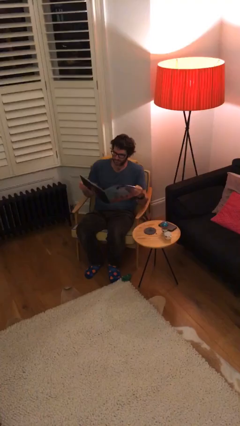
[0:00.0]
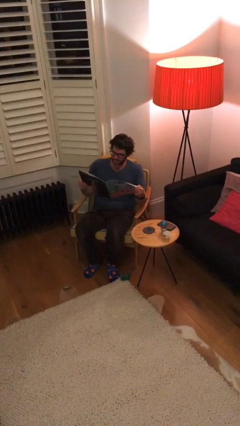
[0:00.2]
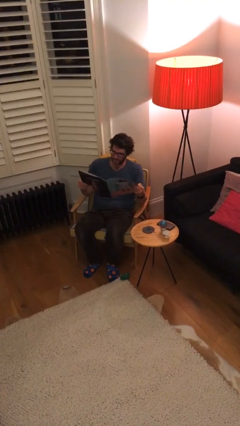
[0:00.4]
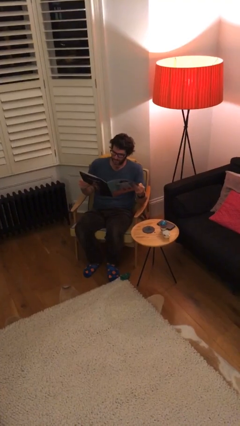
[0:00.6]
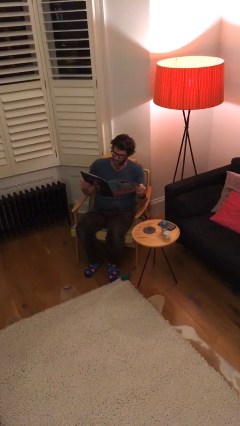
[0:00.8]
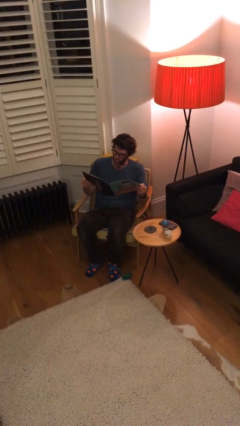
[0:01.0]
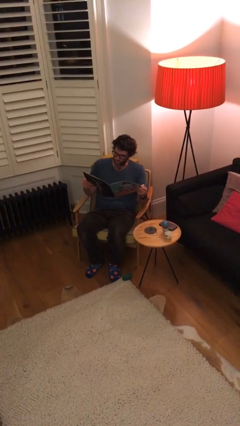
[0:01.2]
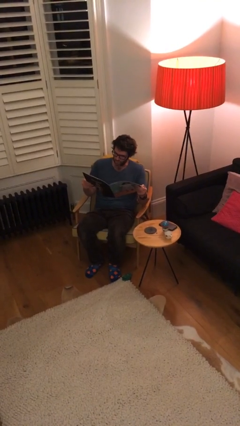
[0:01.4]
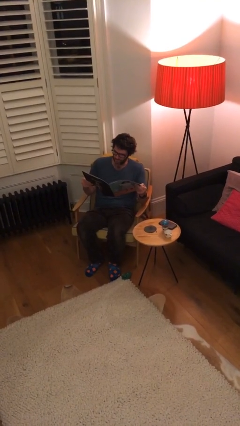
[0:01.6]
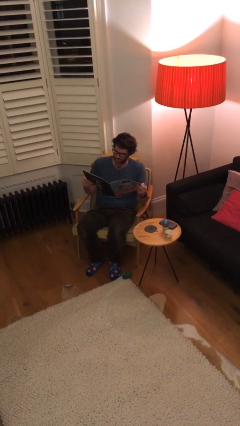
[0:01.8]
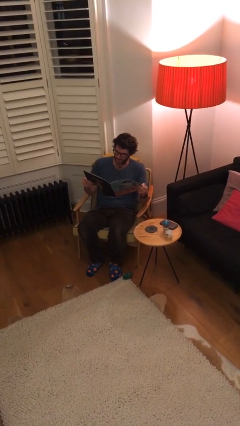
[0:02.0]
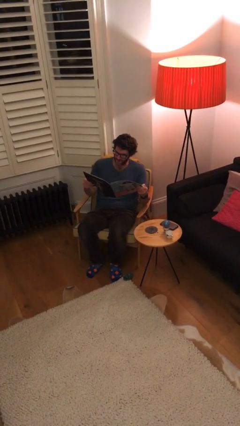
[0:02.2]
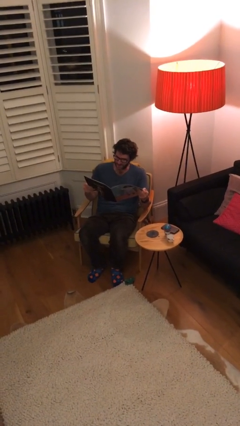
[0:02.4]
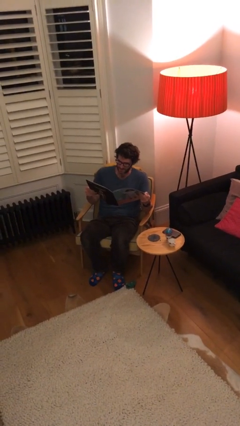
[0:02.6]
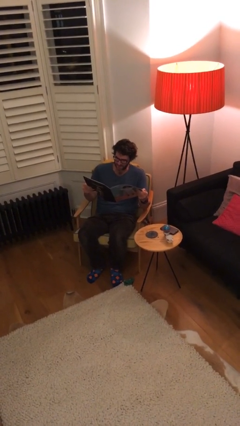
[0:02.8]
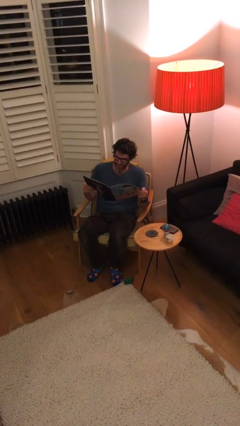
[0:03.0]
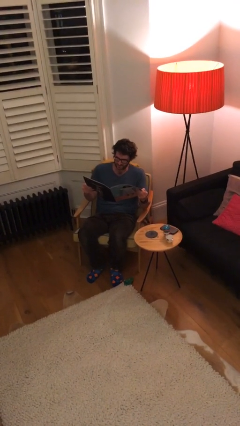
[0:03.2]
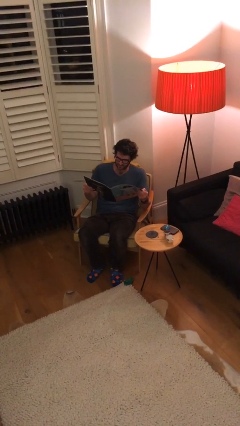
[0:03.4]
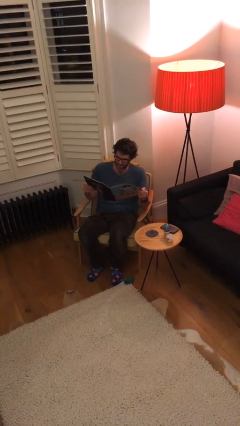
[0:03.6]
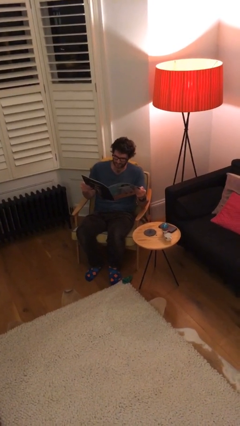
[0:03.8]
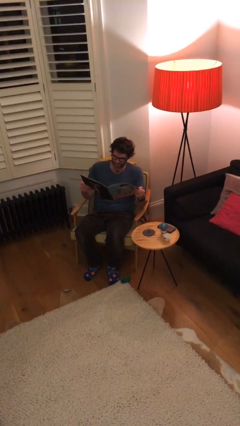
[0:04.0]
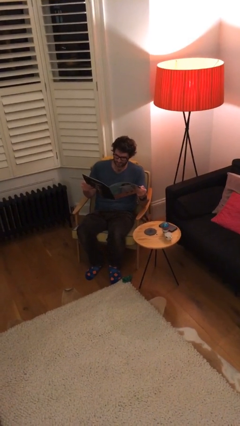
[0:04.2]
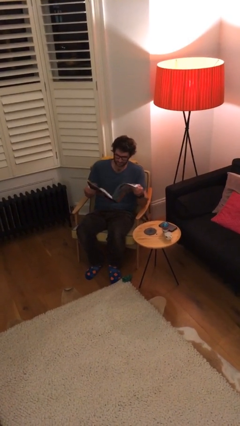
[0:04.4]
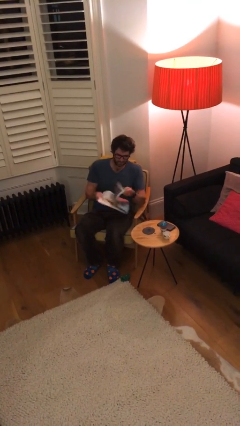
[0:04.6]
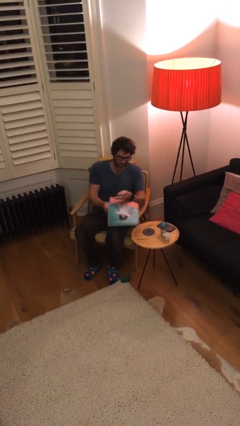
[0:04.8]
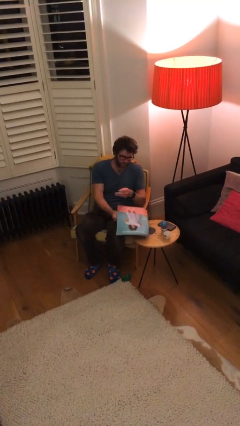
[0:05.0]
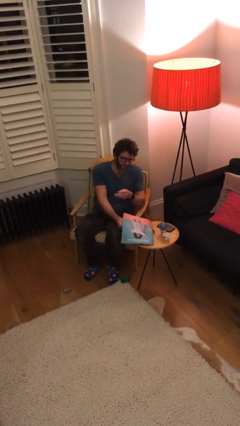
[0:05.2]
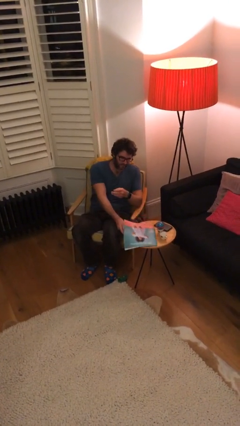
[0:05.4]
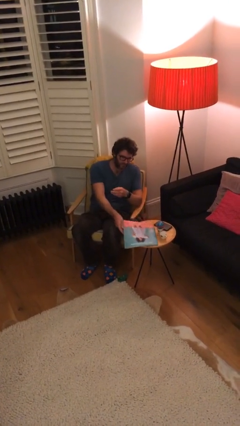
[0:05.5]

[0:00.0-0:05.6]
person reads document

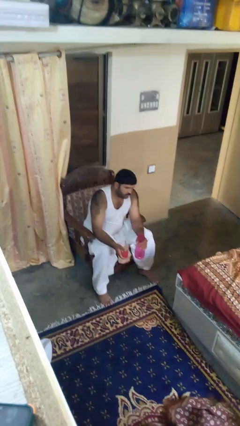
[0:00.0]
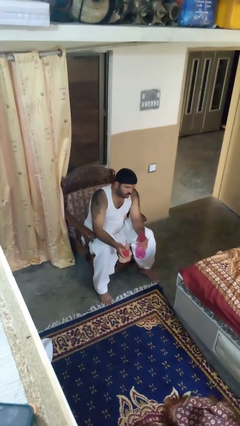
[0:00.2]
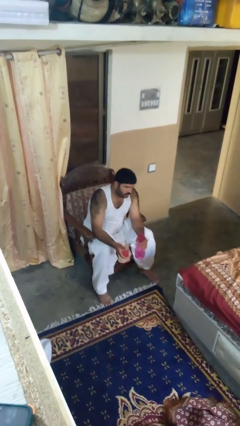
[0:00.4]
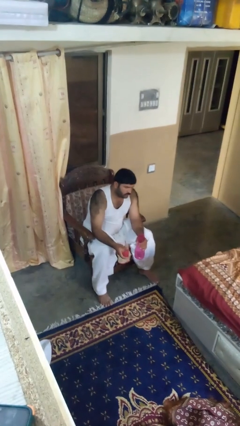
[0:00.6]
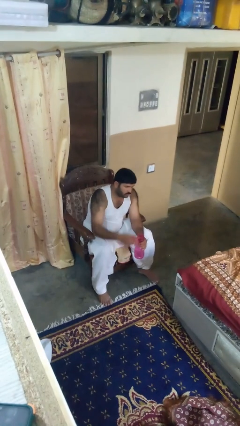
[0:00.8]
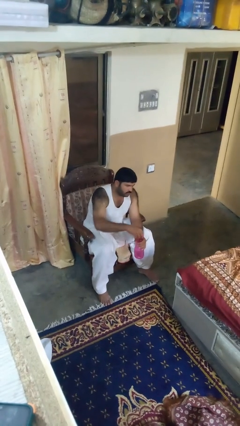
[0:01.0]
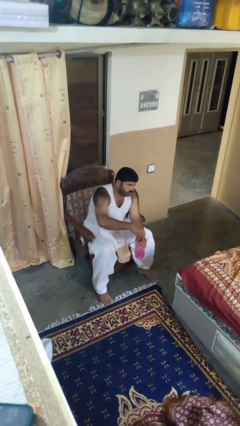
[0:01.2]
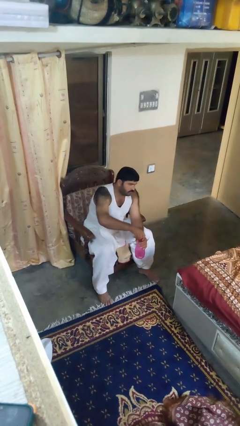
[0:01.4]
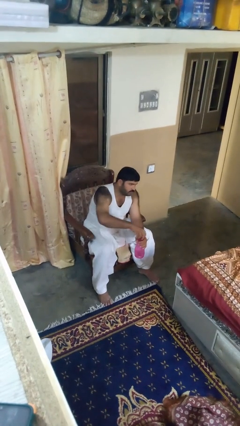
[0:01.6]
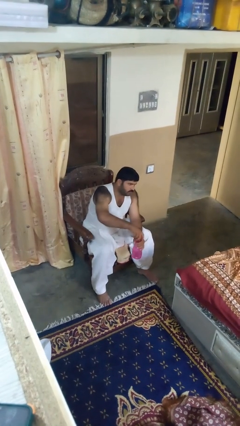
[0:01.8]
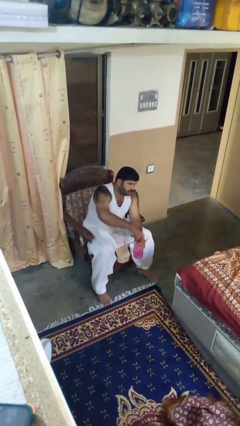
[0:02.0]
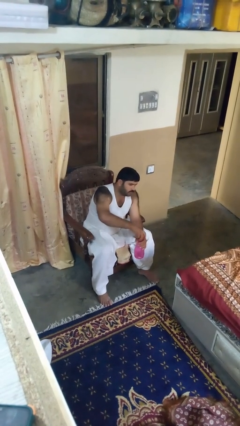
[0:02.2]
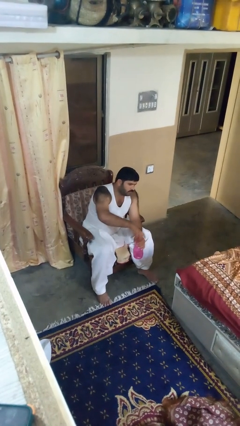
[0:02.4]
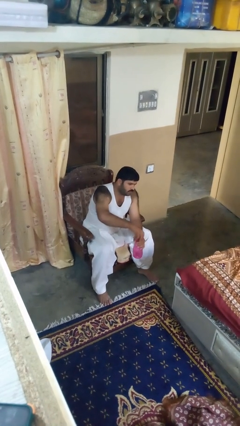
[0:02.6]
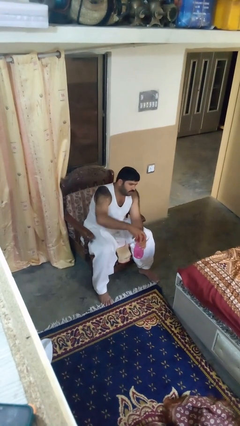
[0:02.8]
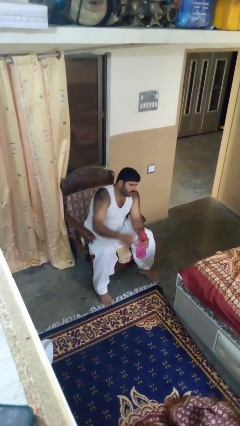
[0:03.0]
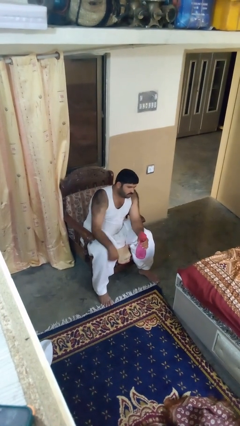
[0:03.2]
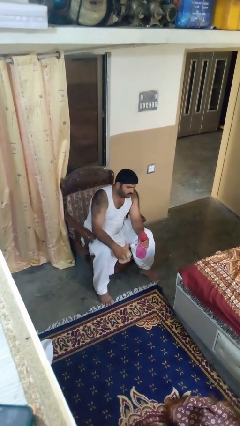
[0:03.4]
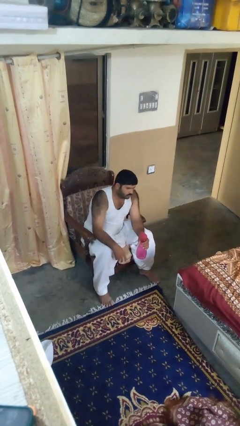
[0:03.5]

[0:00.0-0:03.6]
person screws lid to bottle

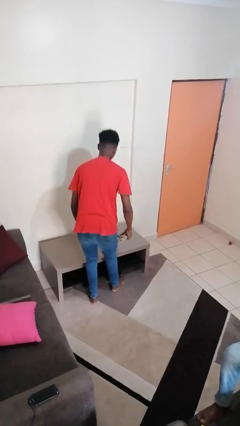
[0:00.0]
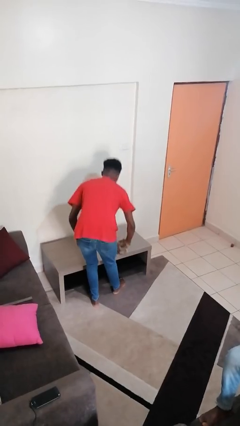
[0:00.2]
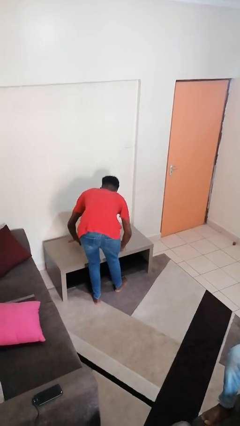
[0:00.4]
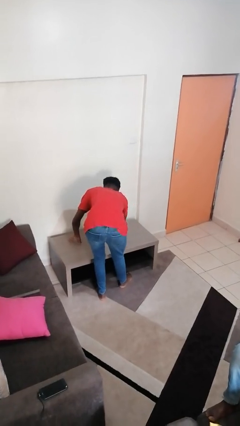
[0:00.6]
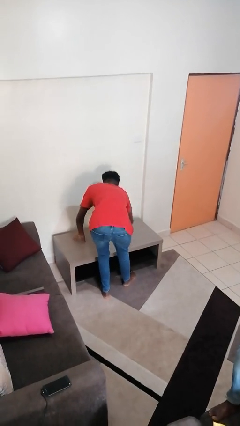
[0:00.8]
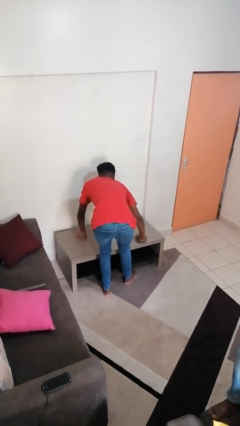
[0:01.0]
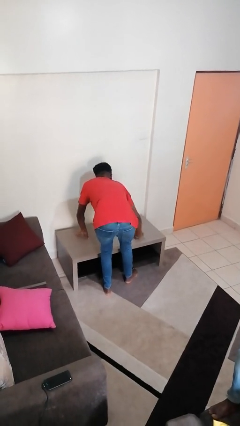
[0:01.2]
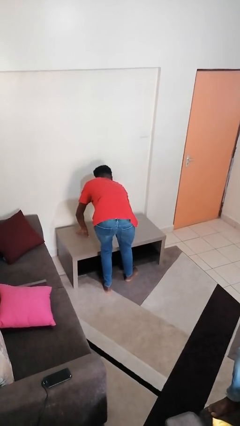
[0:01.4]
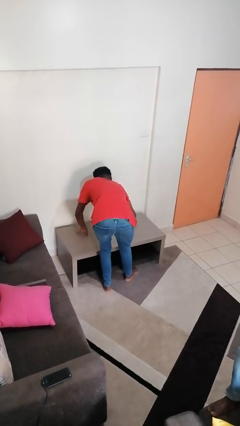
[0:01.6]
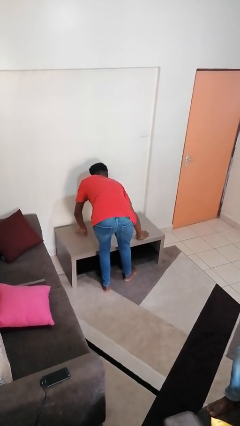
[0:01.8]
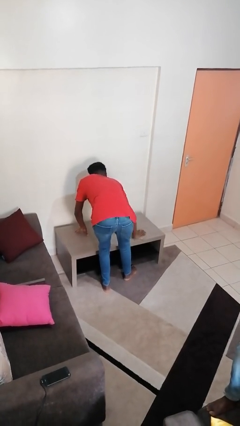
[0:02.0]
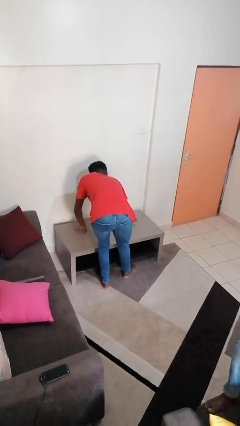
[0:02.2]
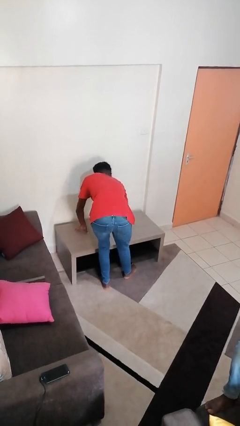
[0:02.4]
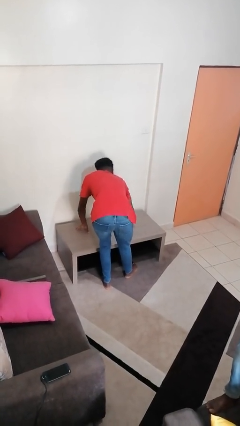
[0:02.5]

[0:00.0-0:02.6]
person cleans table with rag

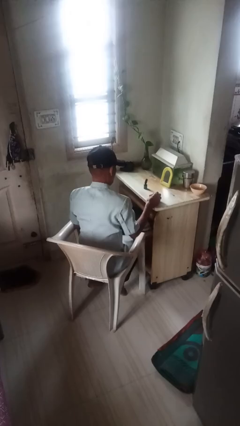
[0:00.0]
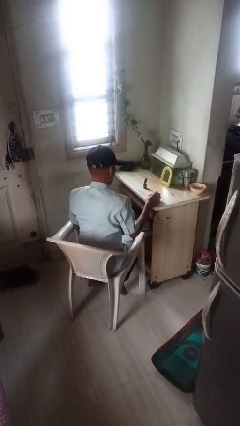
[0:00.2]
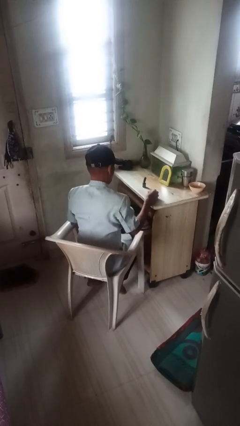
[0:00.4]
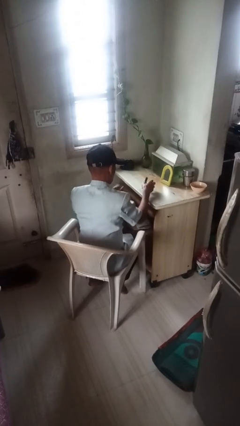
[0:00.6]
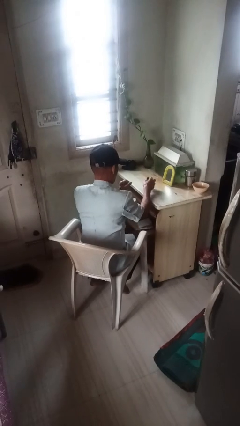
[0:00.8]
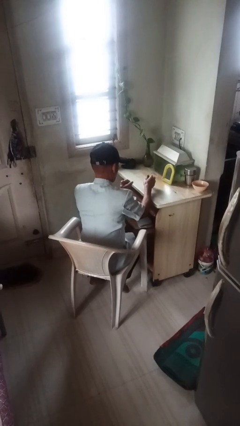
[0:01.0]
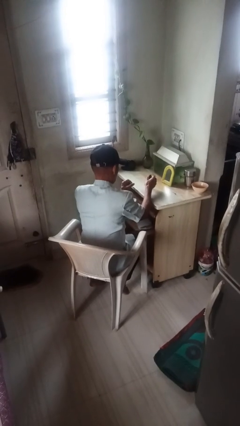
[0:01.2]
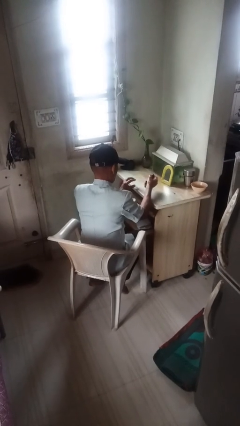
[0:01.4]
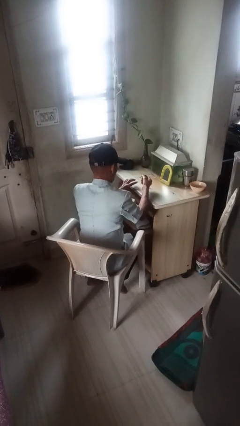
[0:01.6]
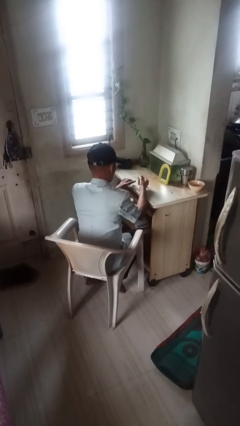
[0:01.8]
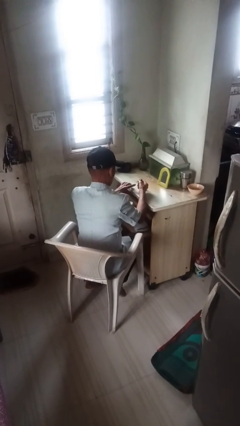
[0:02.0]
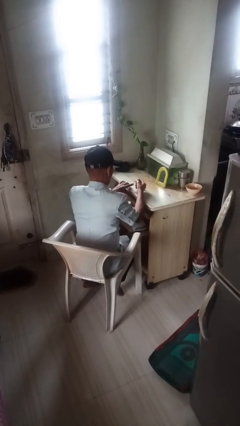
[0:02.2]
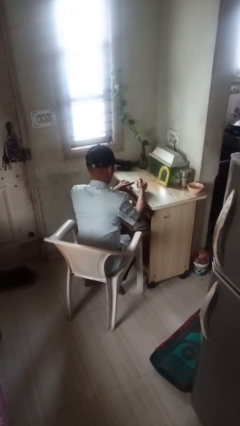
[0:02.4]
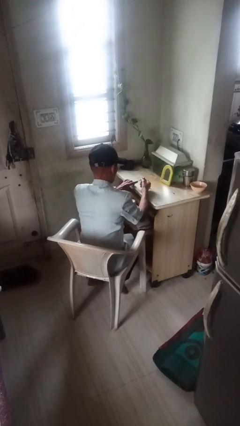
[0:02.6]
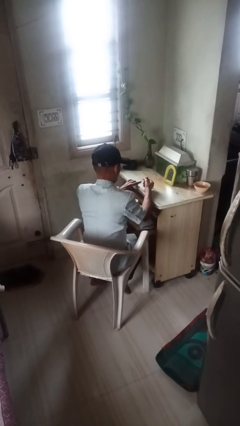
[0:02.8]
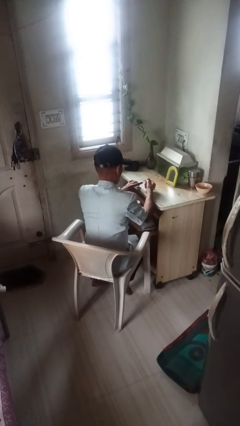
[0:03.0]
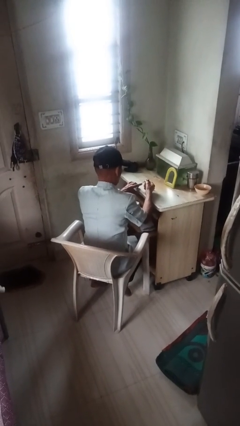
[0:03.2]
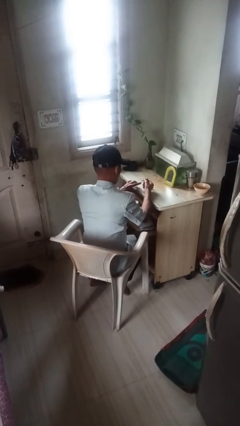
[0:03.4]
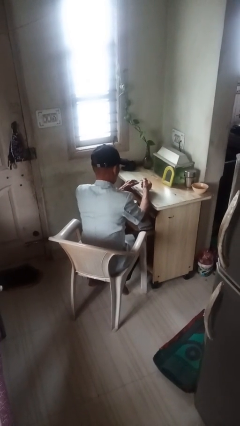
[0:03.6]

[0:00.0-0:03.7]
person paints fingernails

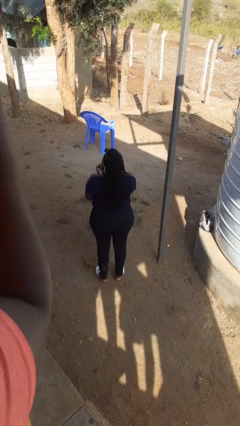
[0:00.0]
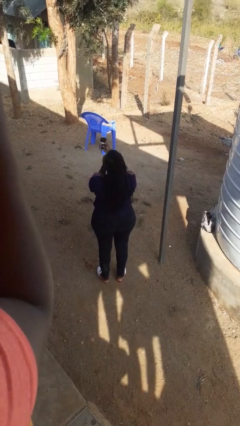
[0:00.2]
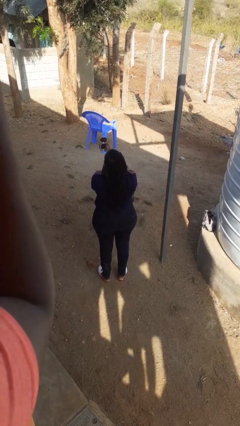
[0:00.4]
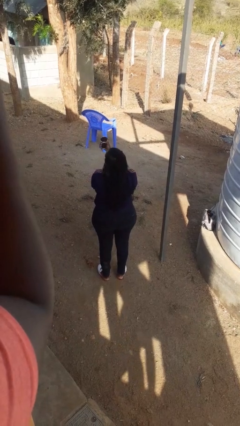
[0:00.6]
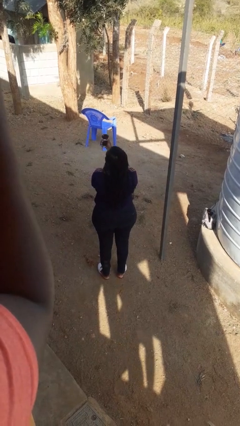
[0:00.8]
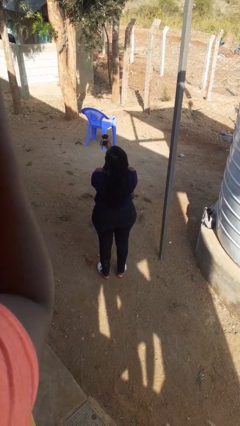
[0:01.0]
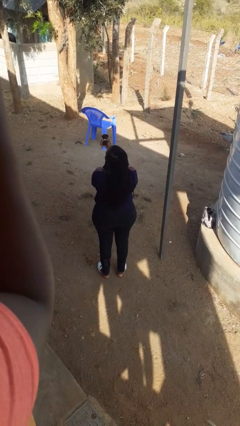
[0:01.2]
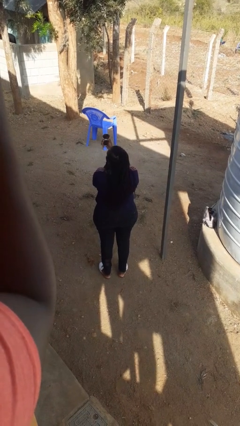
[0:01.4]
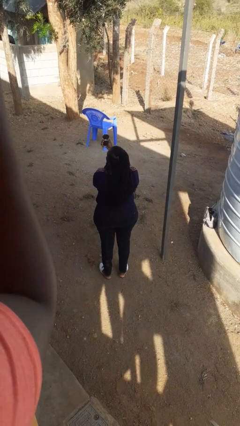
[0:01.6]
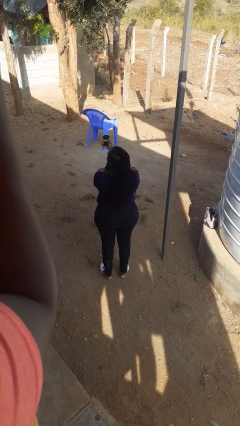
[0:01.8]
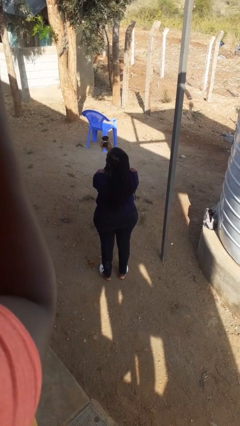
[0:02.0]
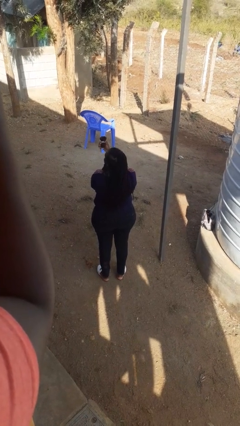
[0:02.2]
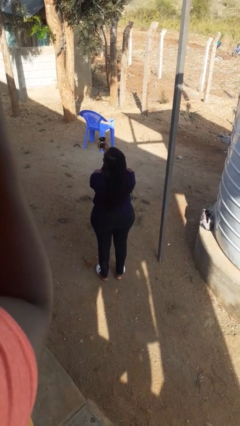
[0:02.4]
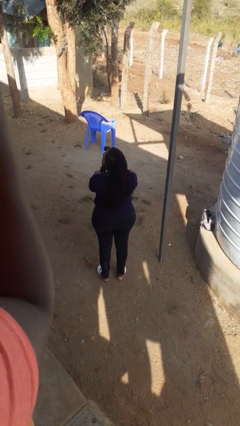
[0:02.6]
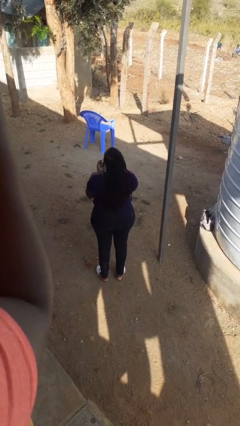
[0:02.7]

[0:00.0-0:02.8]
person applies eye makeup
